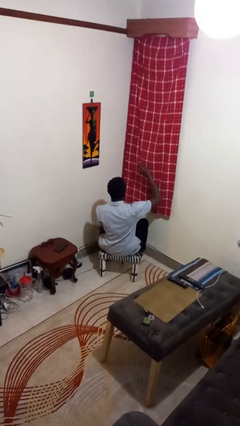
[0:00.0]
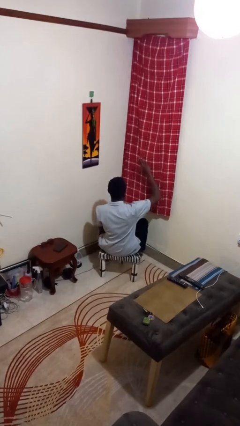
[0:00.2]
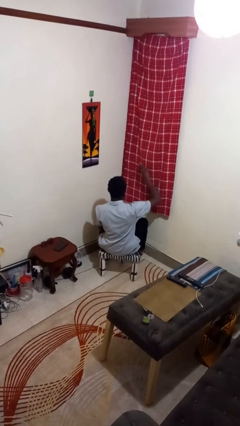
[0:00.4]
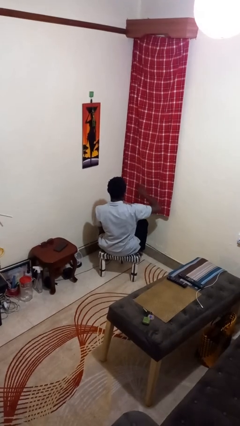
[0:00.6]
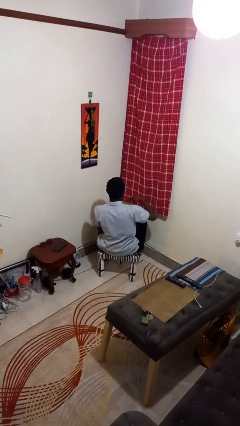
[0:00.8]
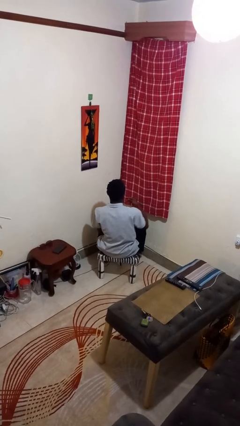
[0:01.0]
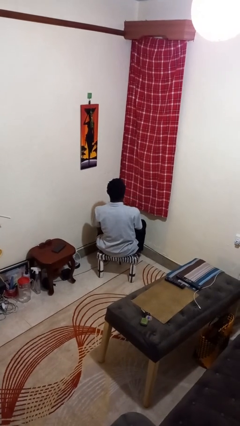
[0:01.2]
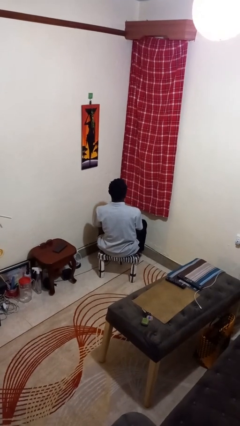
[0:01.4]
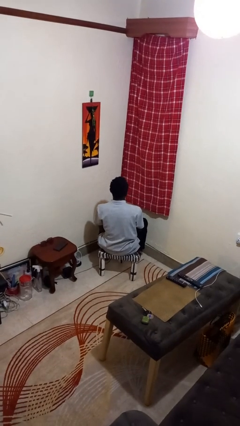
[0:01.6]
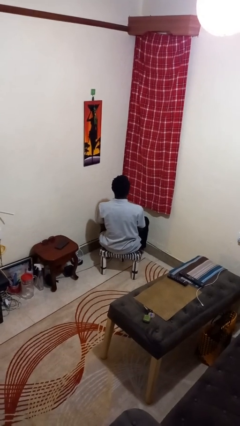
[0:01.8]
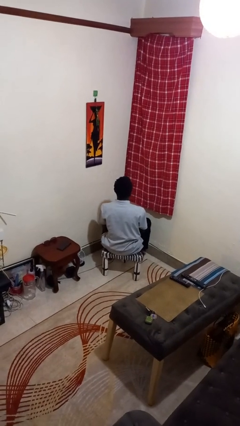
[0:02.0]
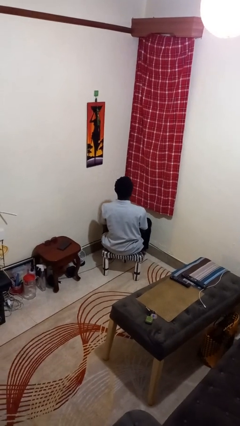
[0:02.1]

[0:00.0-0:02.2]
person gestures swipe down

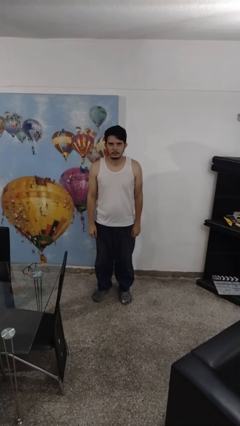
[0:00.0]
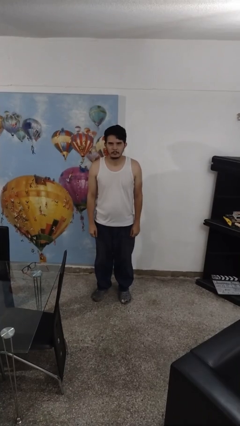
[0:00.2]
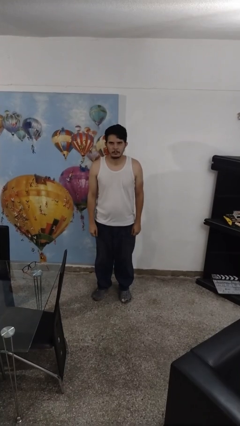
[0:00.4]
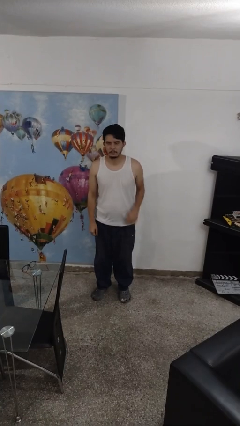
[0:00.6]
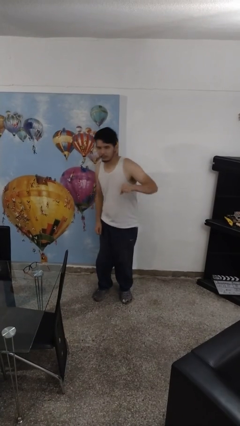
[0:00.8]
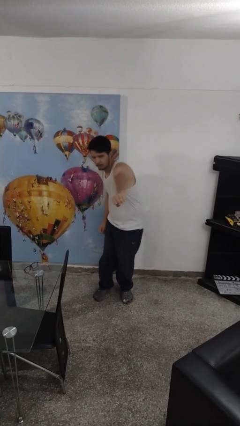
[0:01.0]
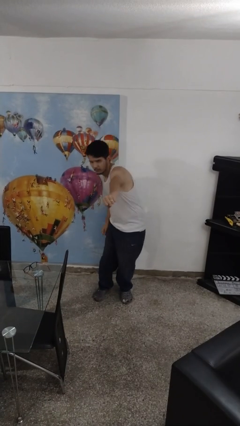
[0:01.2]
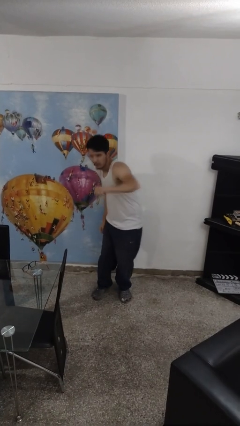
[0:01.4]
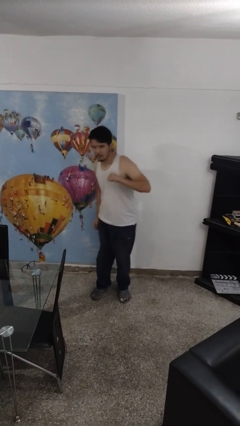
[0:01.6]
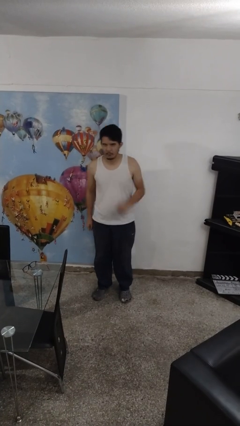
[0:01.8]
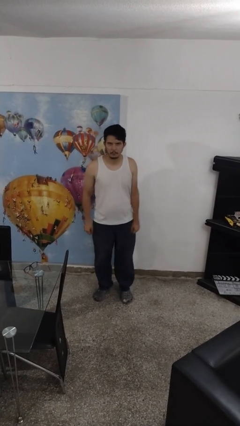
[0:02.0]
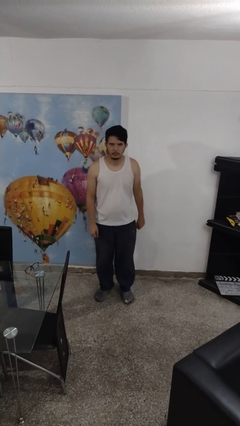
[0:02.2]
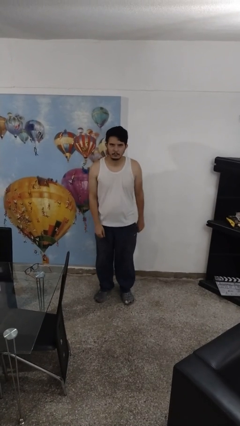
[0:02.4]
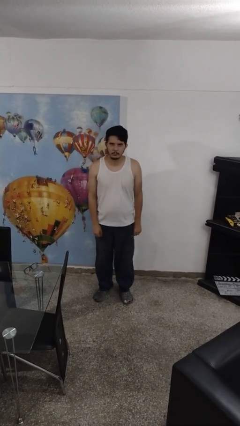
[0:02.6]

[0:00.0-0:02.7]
person karate chop

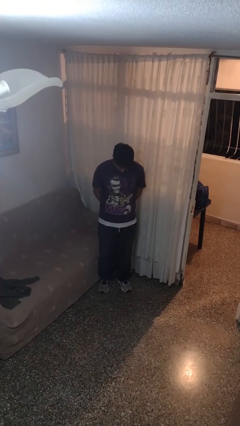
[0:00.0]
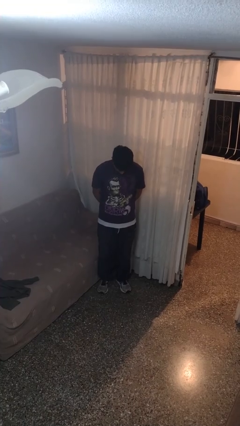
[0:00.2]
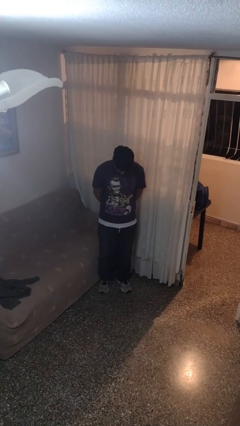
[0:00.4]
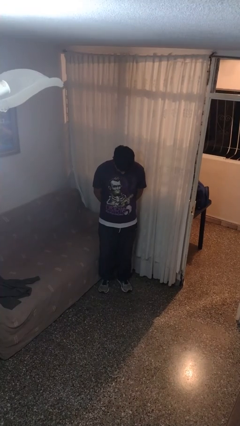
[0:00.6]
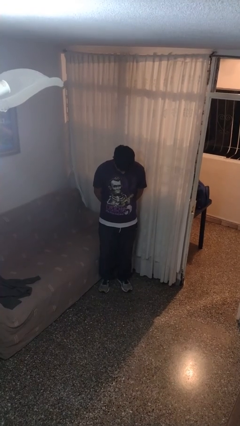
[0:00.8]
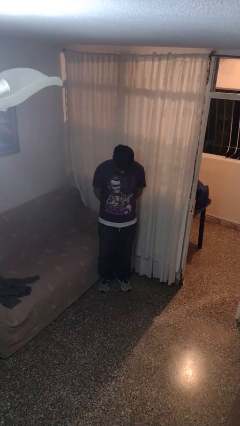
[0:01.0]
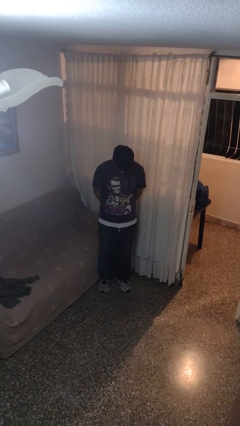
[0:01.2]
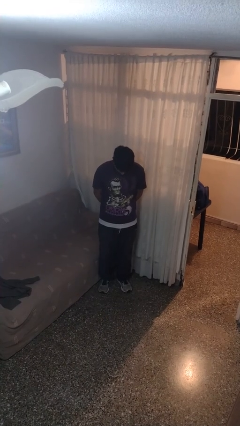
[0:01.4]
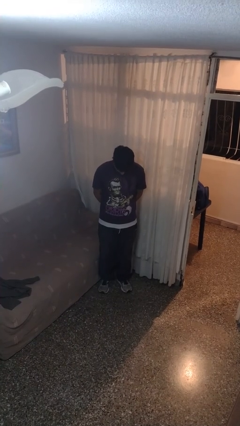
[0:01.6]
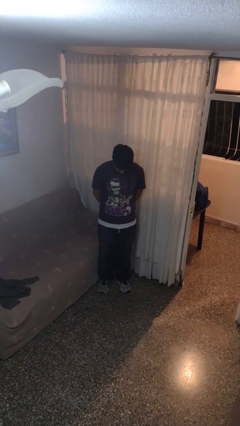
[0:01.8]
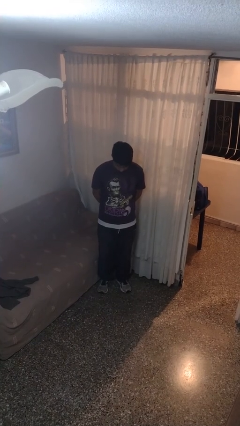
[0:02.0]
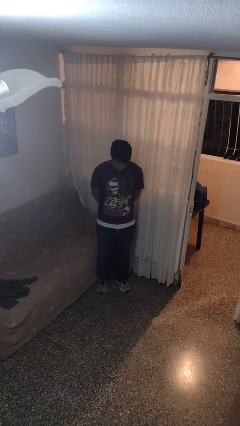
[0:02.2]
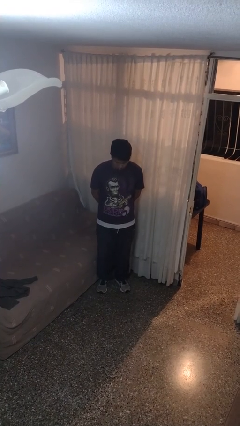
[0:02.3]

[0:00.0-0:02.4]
person prays

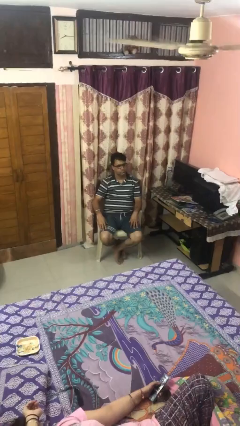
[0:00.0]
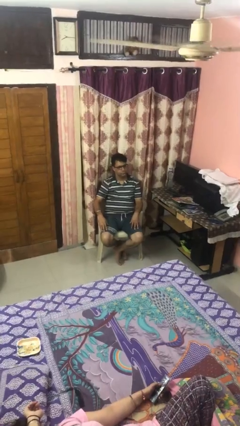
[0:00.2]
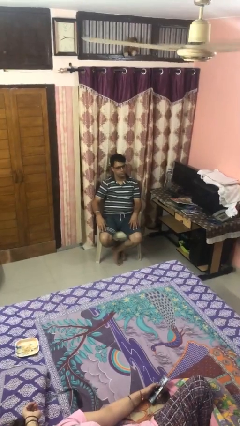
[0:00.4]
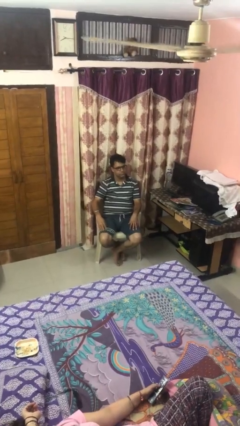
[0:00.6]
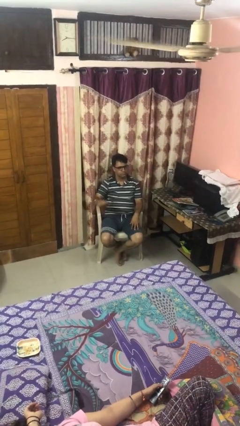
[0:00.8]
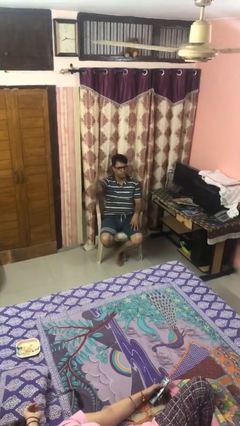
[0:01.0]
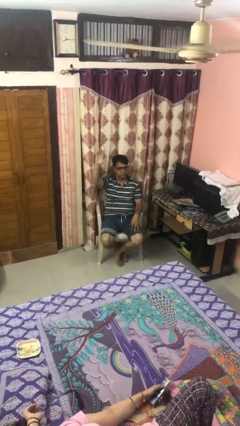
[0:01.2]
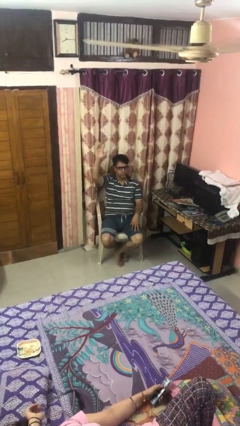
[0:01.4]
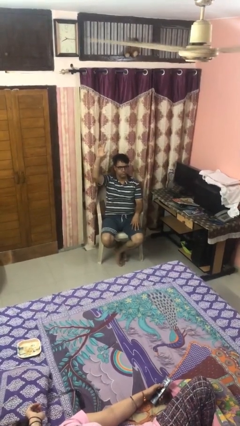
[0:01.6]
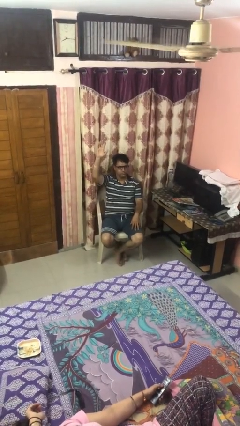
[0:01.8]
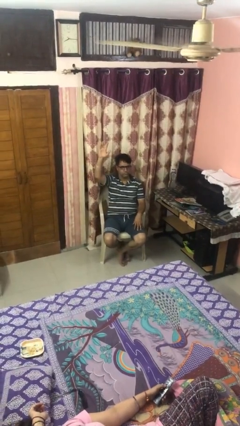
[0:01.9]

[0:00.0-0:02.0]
person gestures raise hand

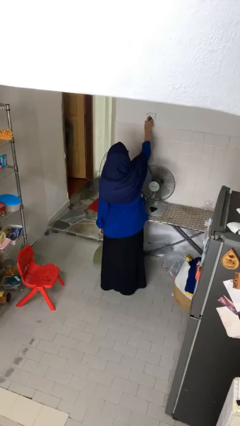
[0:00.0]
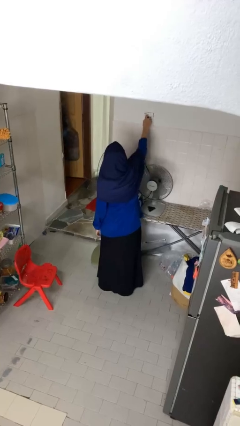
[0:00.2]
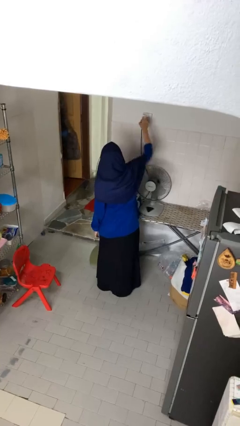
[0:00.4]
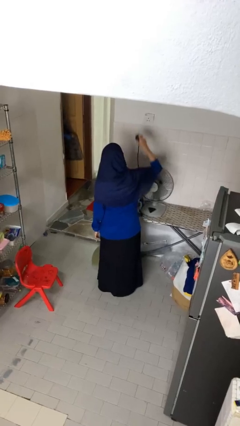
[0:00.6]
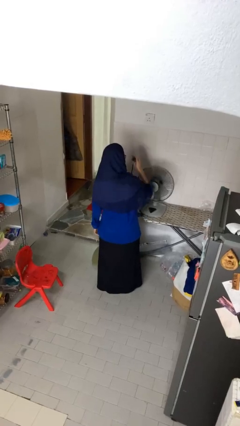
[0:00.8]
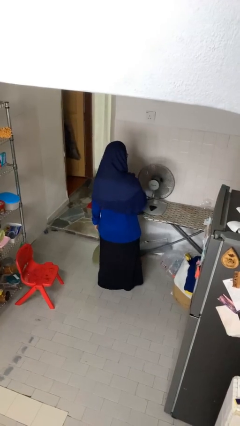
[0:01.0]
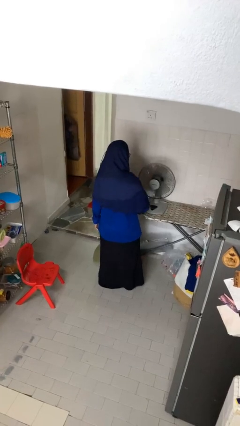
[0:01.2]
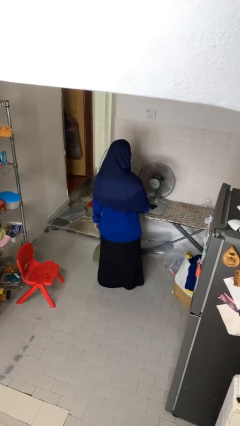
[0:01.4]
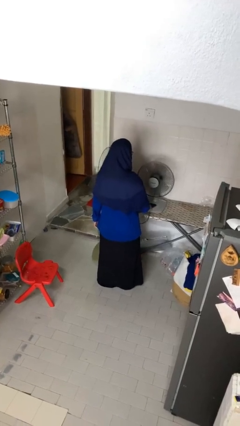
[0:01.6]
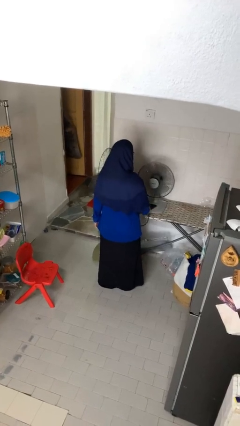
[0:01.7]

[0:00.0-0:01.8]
person unplugs from electrical socket

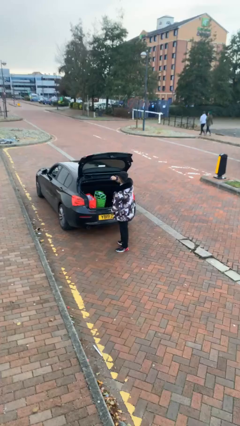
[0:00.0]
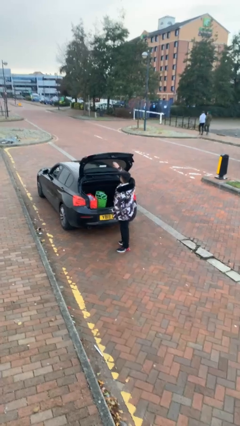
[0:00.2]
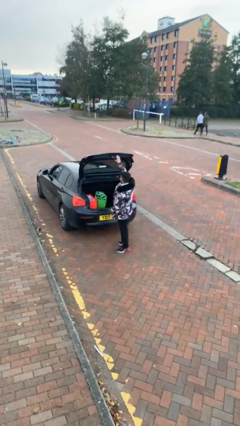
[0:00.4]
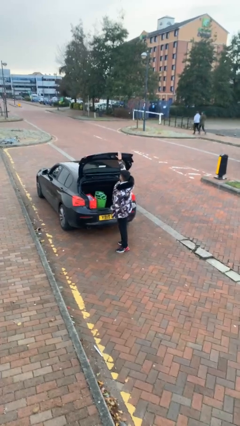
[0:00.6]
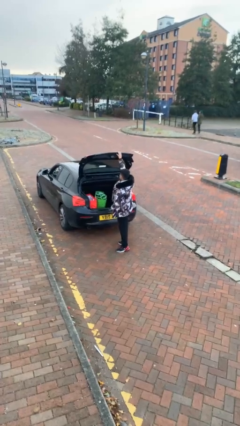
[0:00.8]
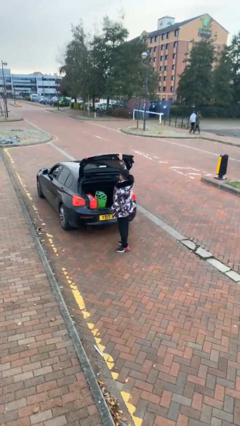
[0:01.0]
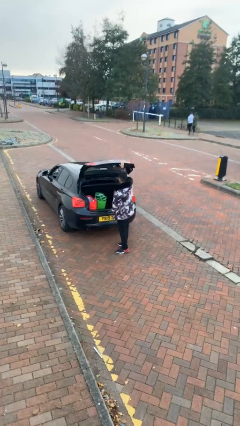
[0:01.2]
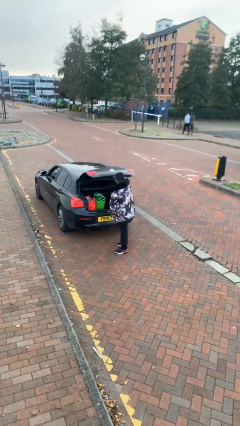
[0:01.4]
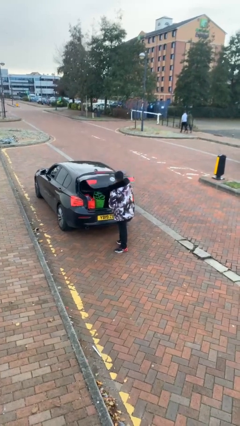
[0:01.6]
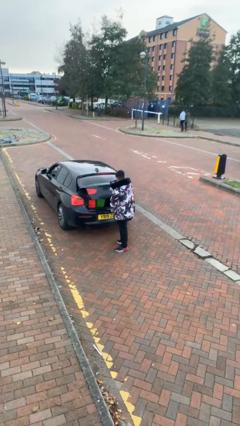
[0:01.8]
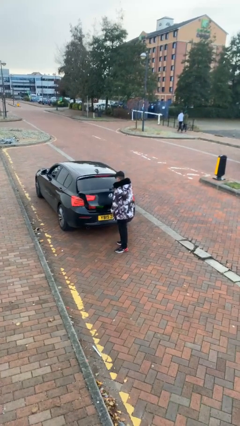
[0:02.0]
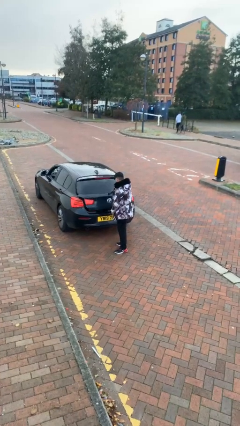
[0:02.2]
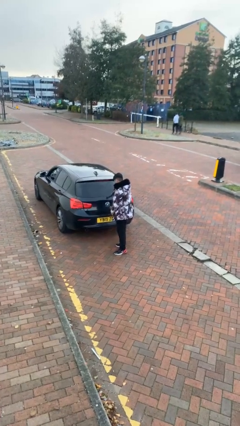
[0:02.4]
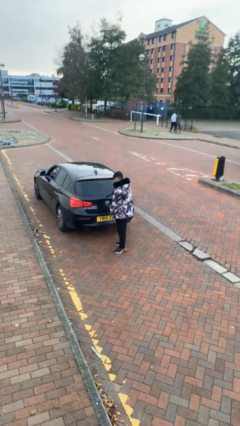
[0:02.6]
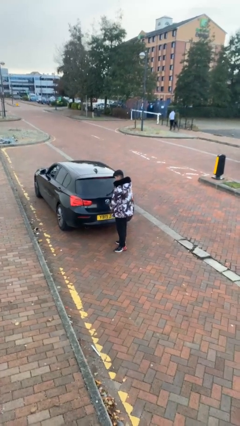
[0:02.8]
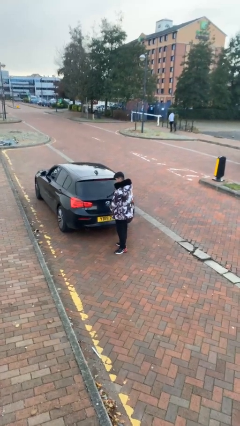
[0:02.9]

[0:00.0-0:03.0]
person closes car trunk

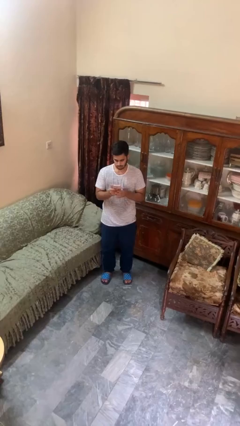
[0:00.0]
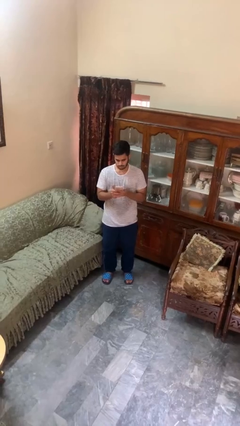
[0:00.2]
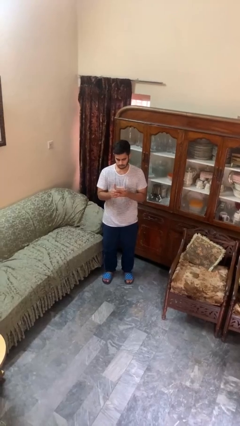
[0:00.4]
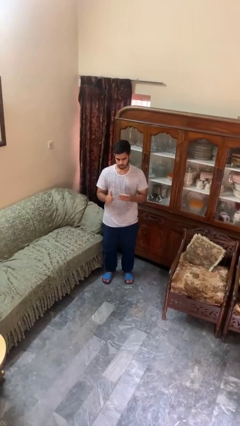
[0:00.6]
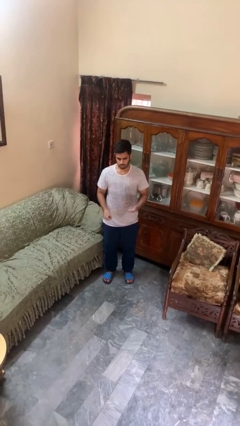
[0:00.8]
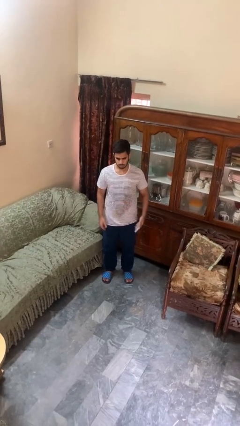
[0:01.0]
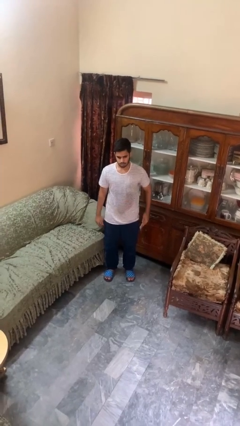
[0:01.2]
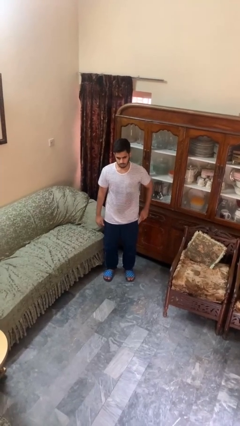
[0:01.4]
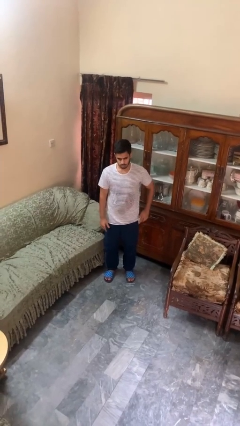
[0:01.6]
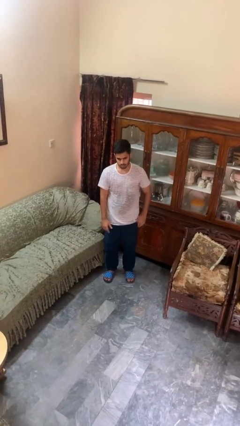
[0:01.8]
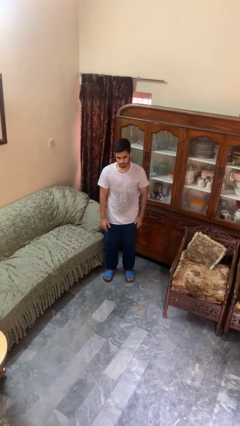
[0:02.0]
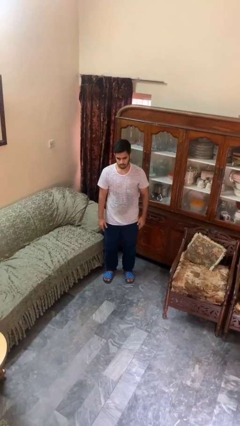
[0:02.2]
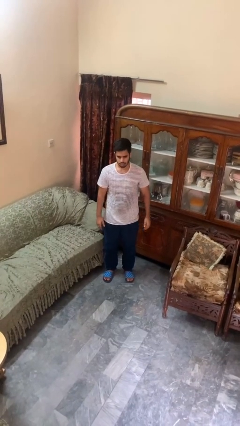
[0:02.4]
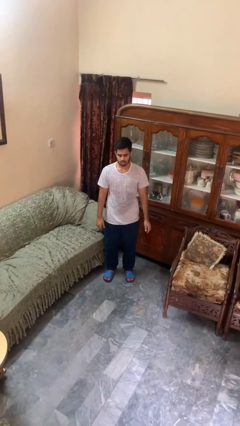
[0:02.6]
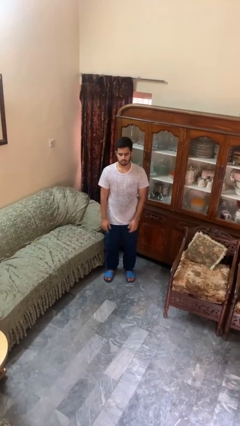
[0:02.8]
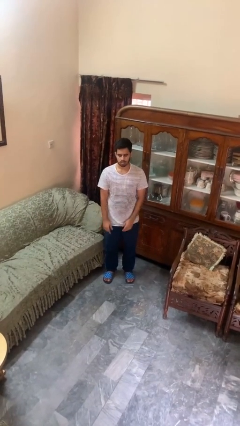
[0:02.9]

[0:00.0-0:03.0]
person puts phone into pocket
